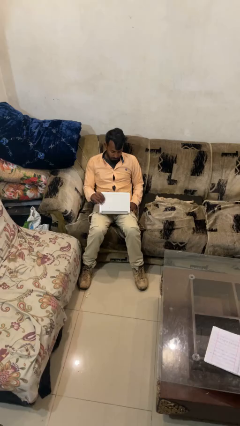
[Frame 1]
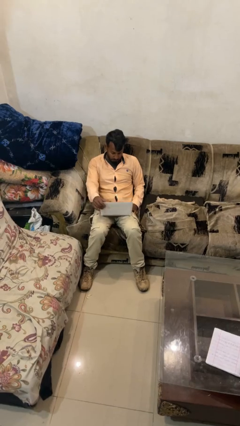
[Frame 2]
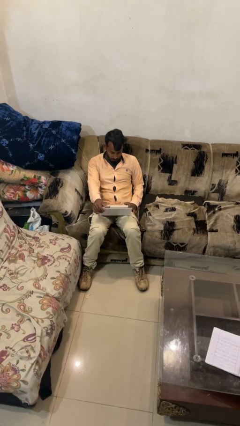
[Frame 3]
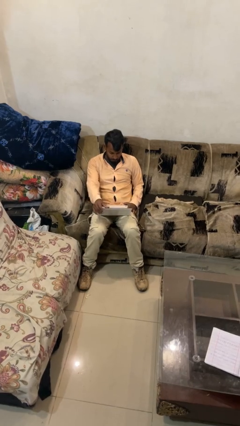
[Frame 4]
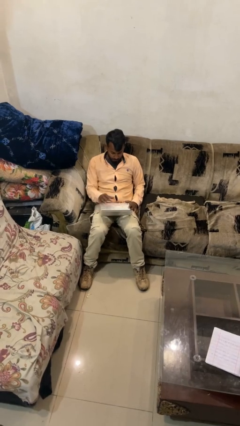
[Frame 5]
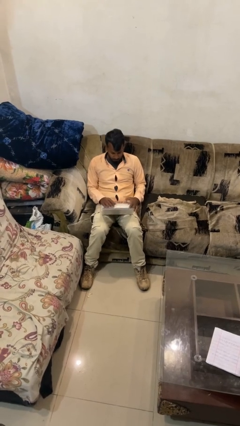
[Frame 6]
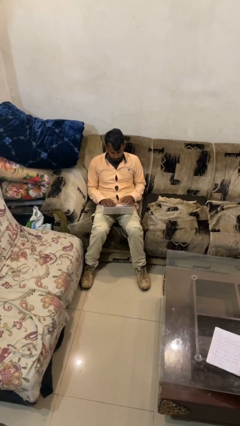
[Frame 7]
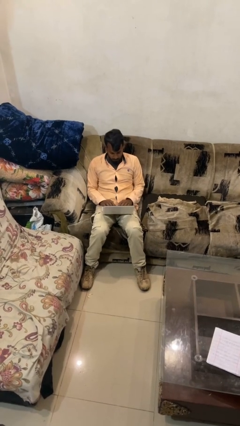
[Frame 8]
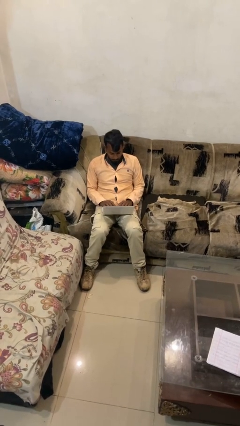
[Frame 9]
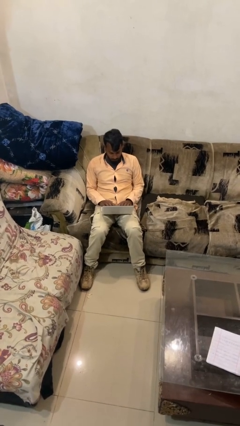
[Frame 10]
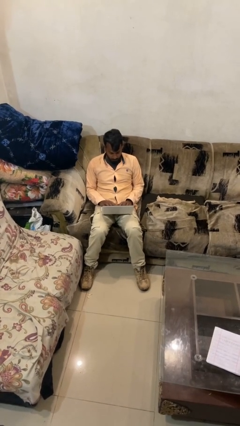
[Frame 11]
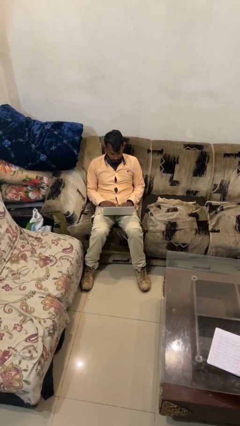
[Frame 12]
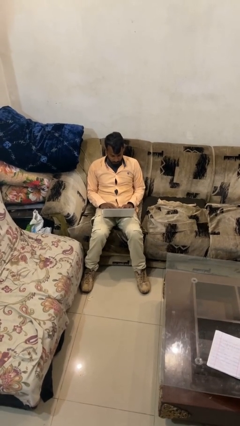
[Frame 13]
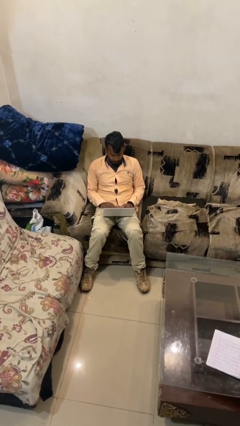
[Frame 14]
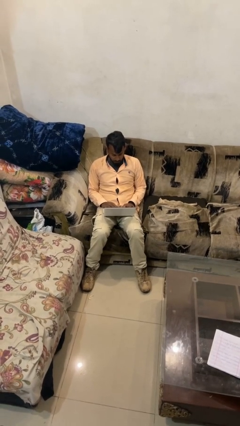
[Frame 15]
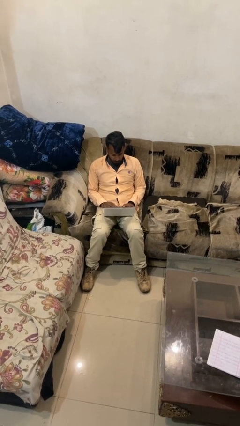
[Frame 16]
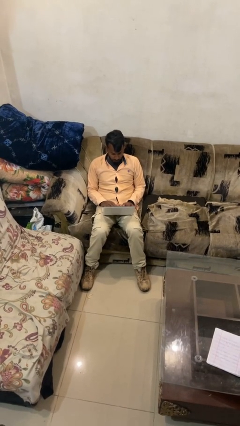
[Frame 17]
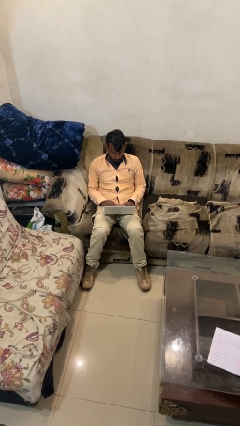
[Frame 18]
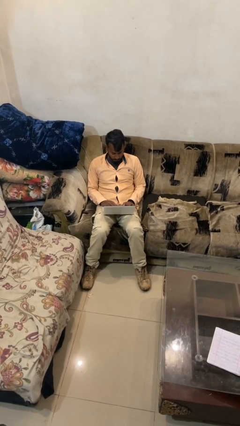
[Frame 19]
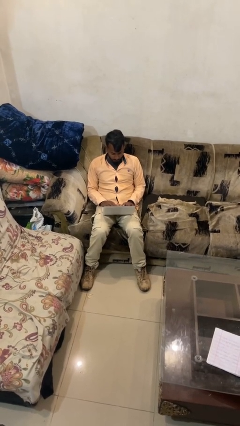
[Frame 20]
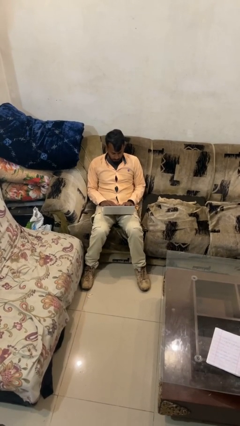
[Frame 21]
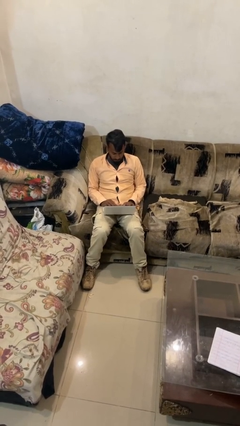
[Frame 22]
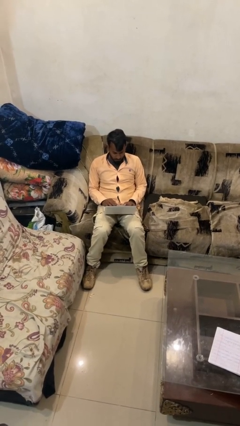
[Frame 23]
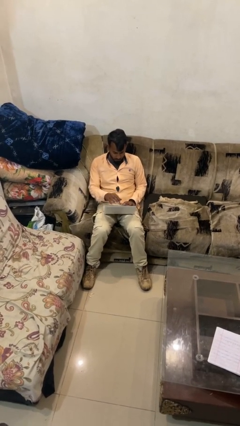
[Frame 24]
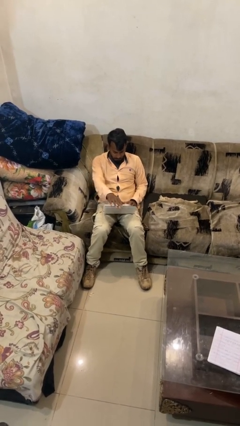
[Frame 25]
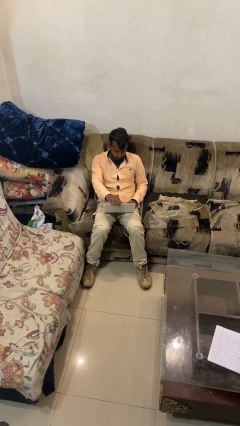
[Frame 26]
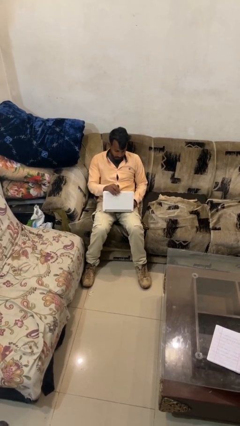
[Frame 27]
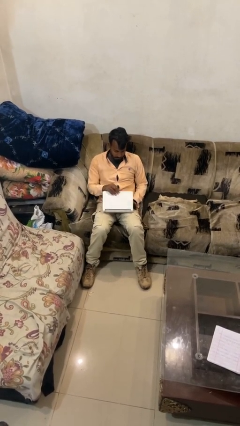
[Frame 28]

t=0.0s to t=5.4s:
person interacts with laptop

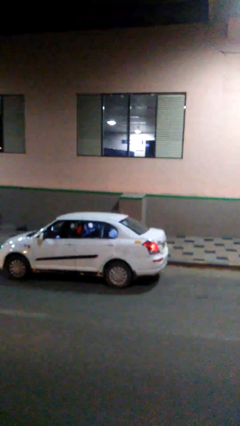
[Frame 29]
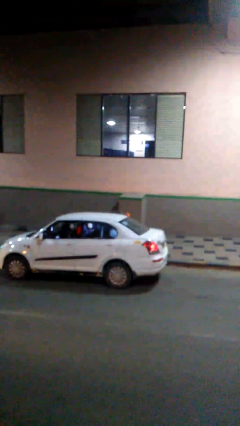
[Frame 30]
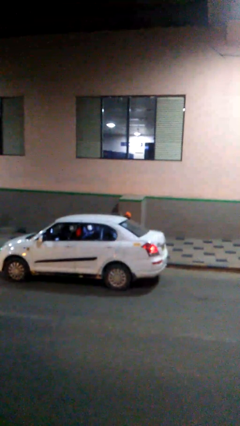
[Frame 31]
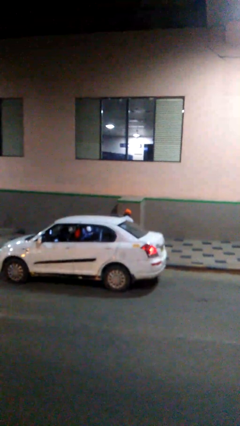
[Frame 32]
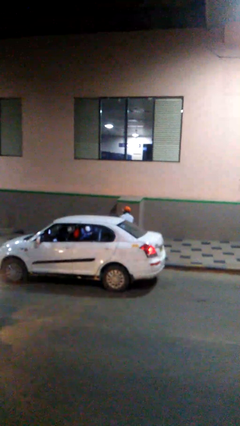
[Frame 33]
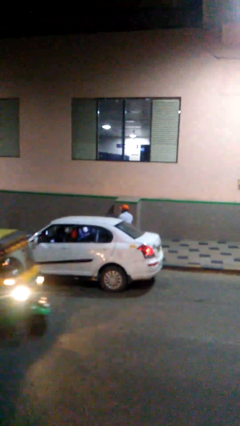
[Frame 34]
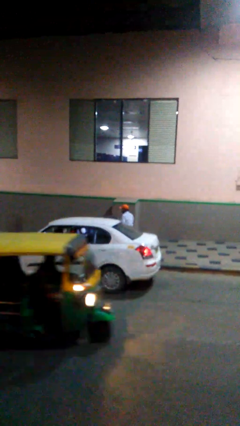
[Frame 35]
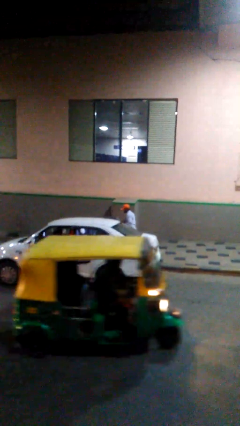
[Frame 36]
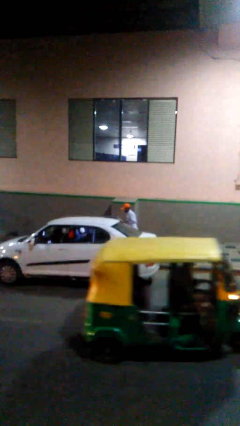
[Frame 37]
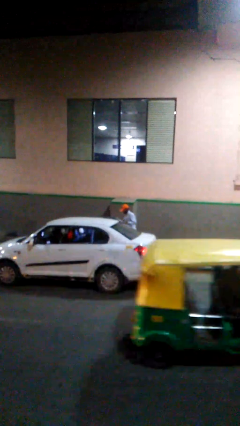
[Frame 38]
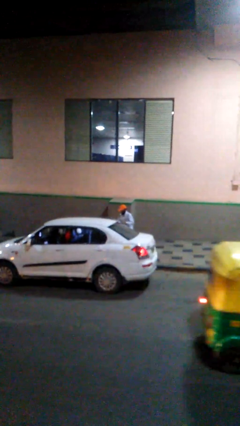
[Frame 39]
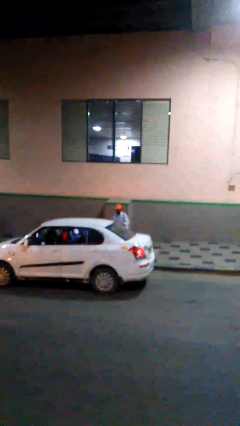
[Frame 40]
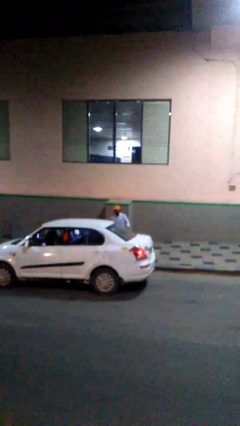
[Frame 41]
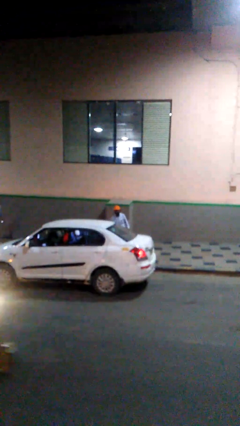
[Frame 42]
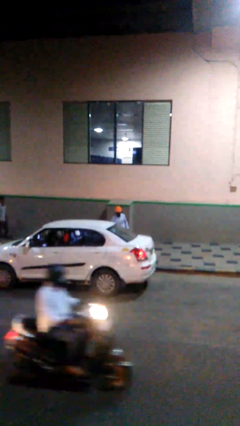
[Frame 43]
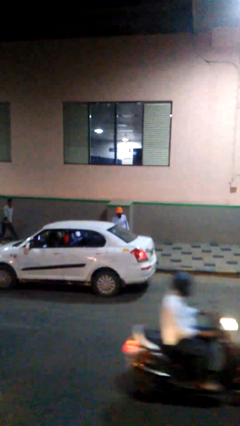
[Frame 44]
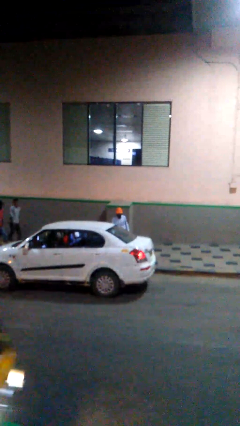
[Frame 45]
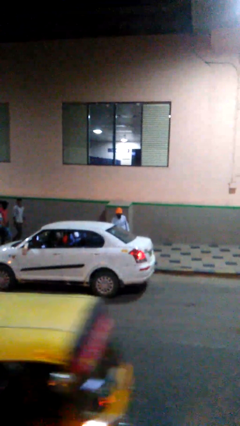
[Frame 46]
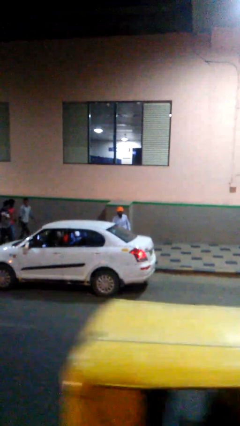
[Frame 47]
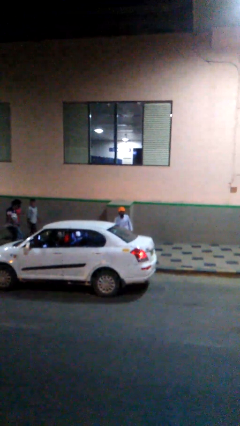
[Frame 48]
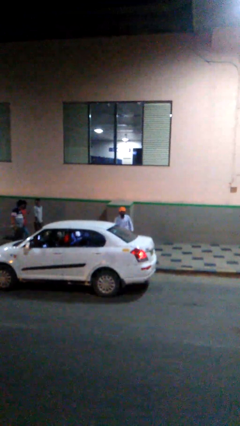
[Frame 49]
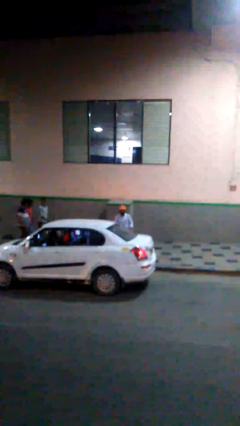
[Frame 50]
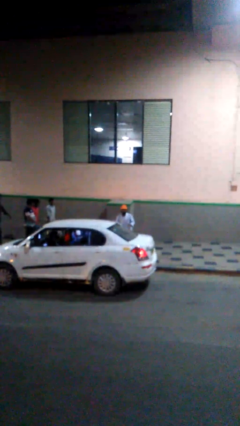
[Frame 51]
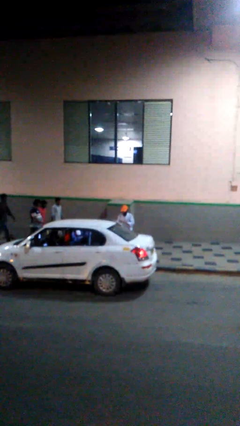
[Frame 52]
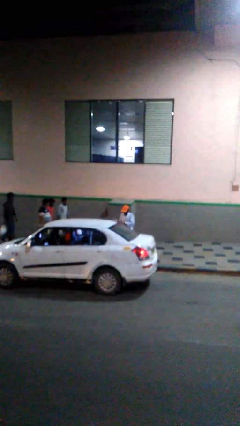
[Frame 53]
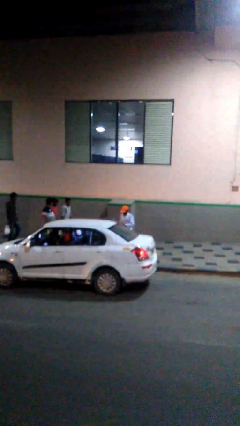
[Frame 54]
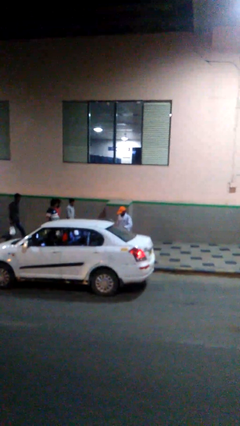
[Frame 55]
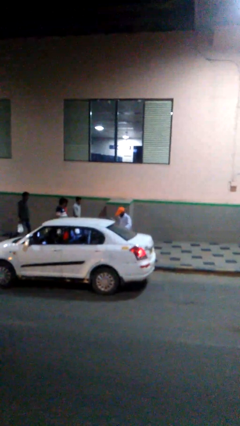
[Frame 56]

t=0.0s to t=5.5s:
person exits car

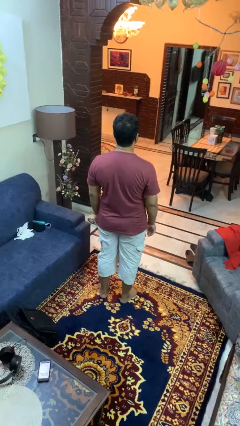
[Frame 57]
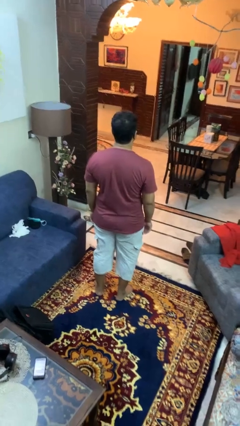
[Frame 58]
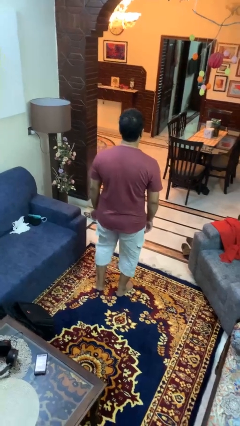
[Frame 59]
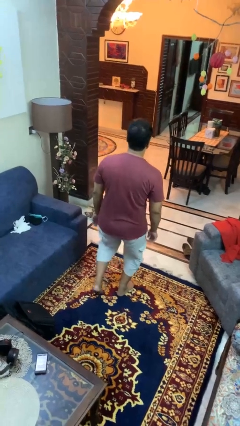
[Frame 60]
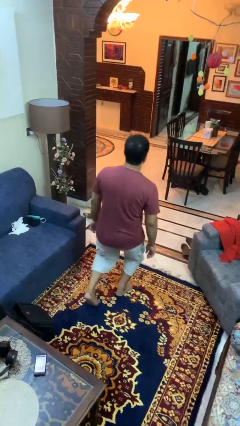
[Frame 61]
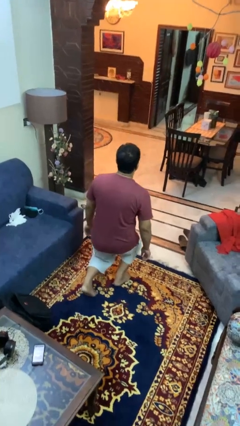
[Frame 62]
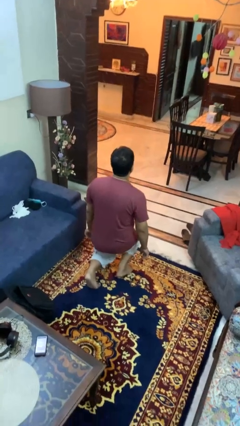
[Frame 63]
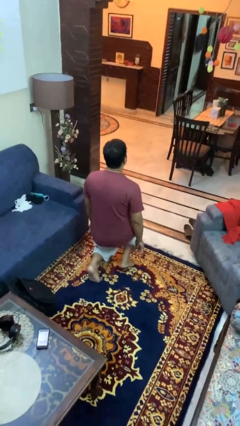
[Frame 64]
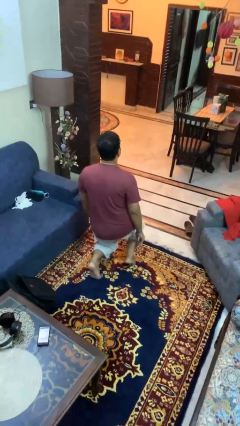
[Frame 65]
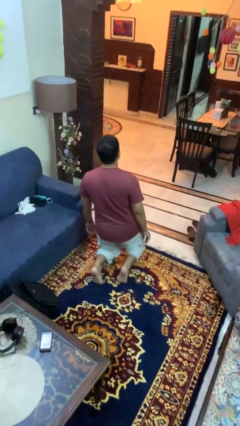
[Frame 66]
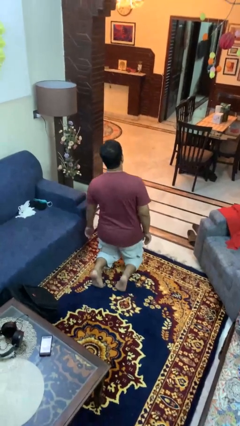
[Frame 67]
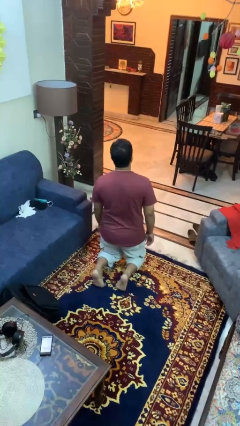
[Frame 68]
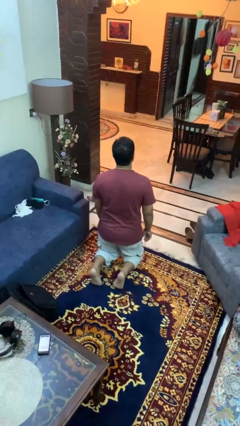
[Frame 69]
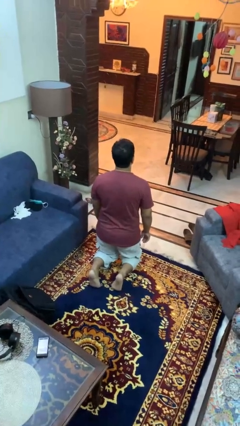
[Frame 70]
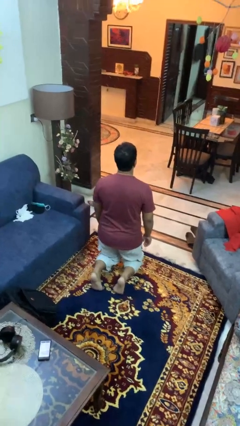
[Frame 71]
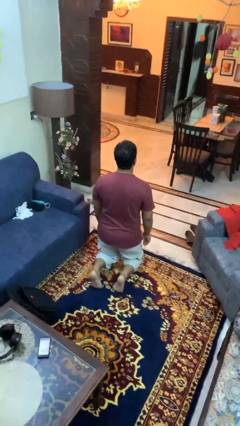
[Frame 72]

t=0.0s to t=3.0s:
person kneels

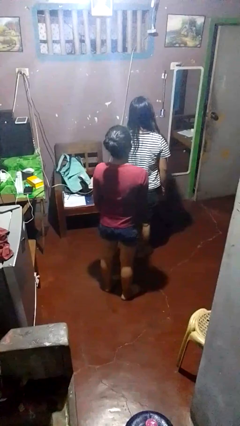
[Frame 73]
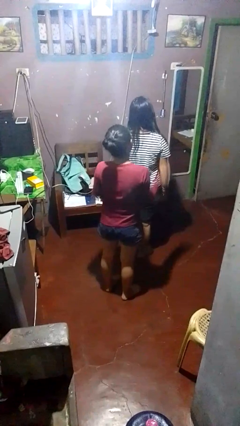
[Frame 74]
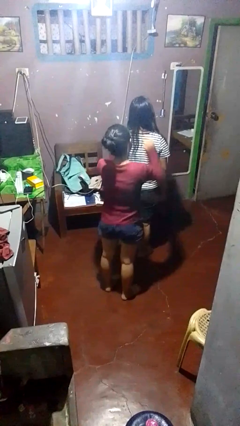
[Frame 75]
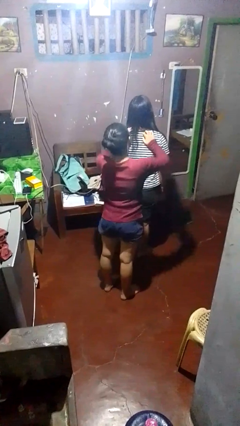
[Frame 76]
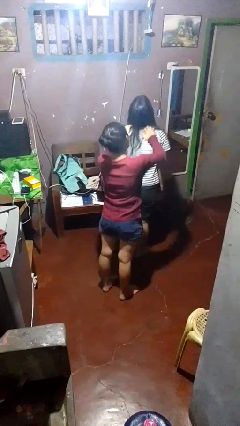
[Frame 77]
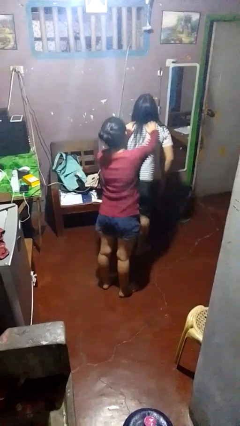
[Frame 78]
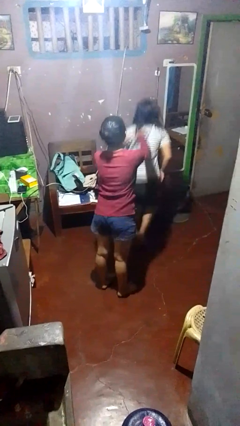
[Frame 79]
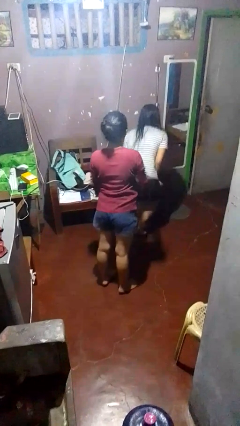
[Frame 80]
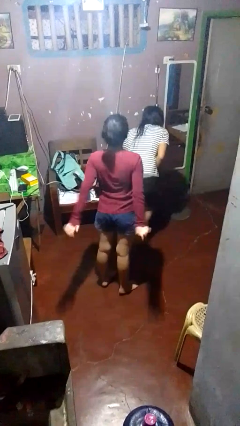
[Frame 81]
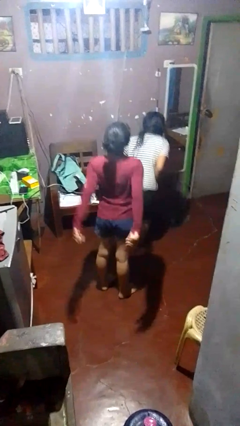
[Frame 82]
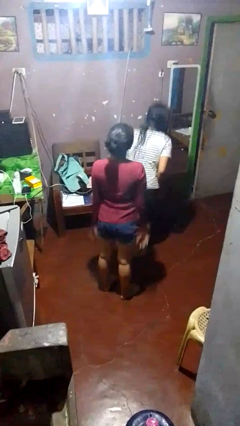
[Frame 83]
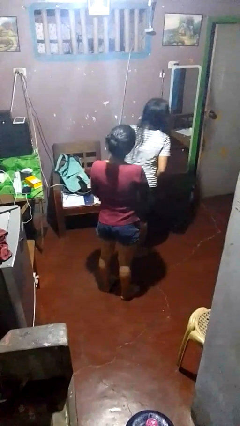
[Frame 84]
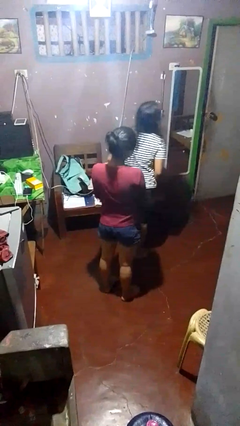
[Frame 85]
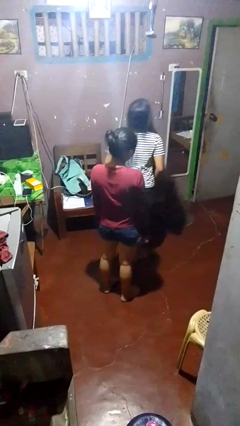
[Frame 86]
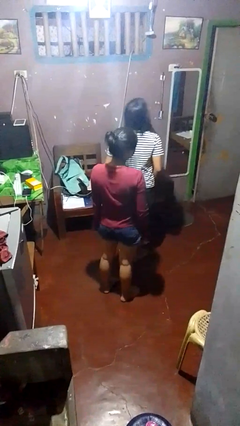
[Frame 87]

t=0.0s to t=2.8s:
person shoves person

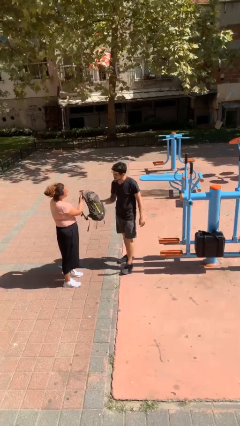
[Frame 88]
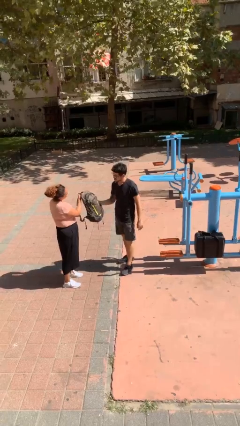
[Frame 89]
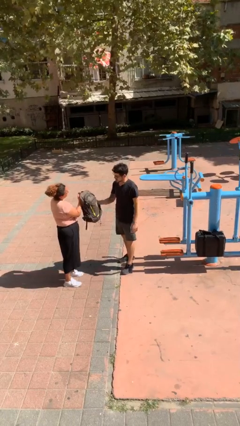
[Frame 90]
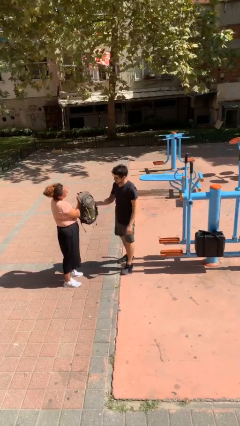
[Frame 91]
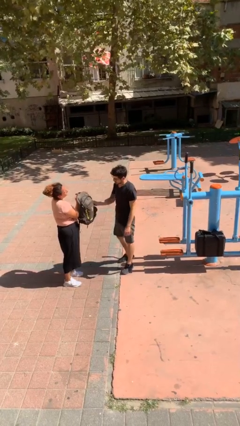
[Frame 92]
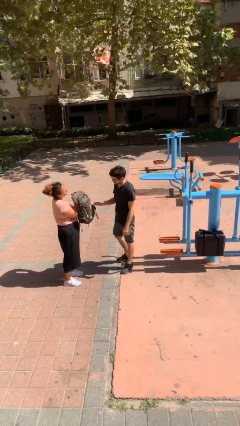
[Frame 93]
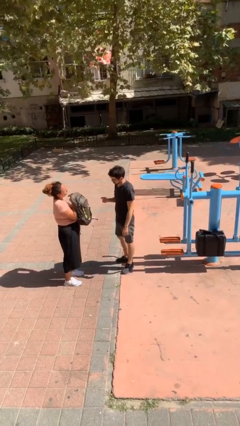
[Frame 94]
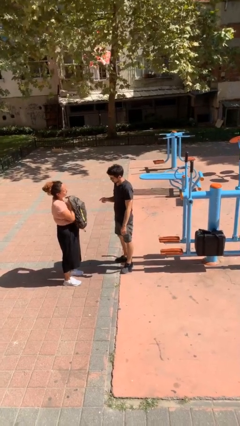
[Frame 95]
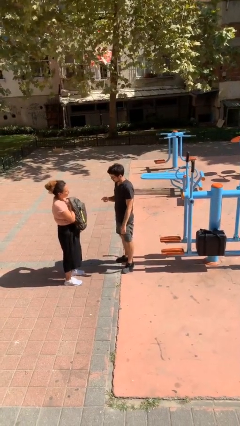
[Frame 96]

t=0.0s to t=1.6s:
person transfers object to person
